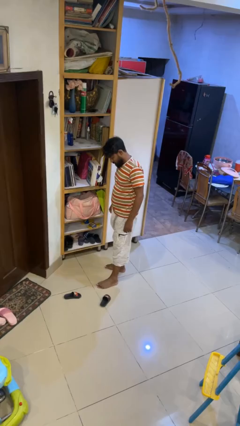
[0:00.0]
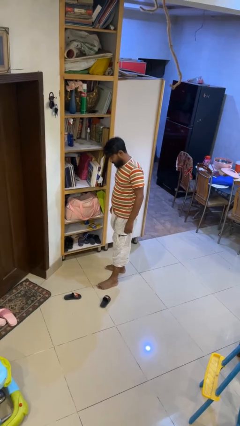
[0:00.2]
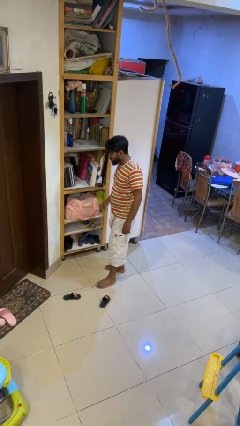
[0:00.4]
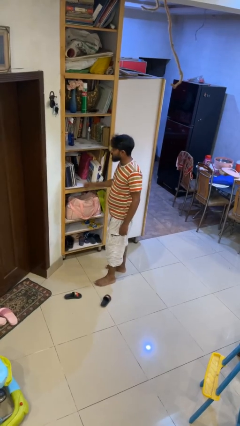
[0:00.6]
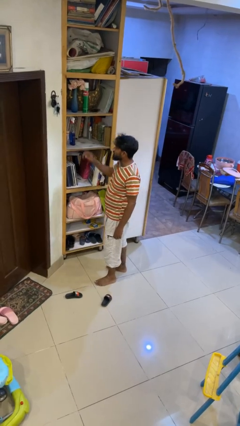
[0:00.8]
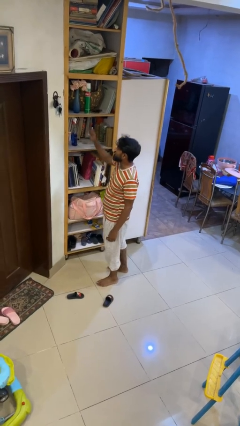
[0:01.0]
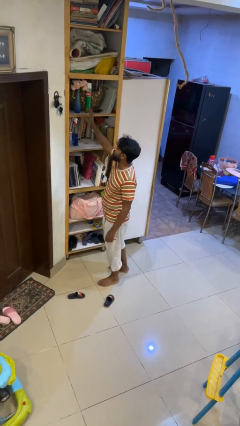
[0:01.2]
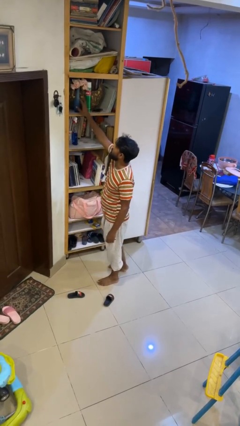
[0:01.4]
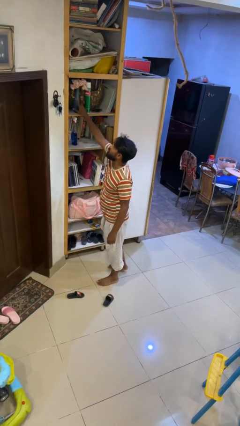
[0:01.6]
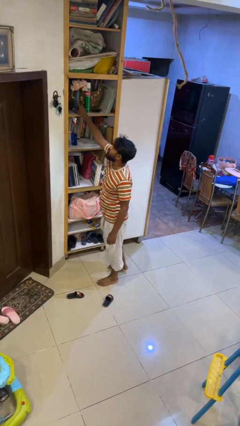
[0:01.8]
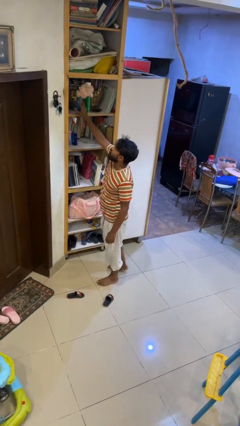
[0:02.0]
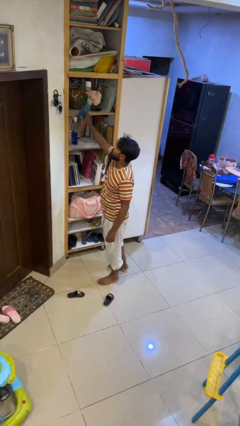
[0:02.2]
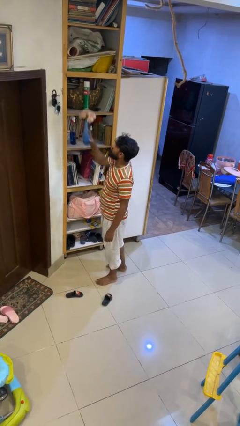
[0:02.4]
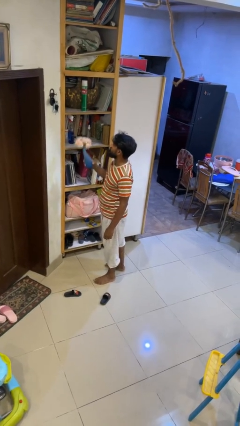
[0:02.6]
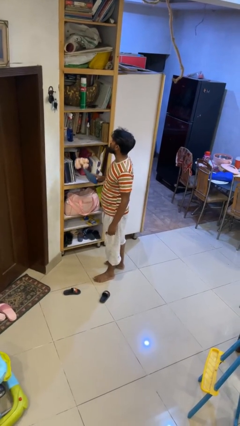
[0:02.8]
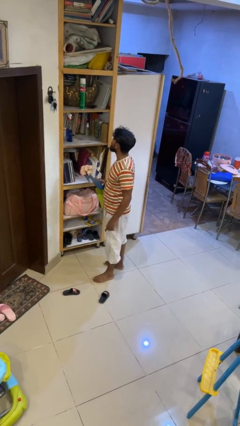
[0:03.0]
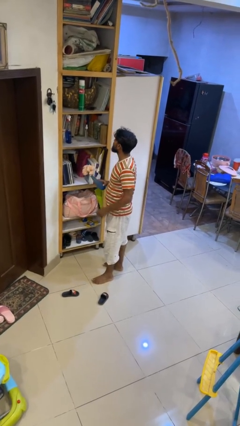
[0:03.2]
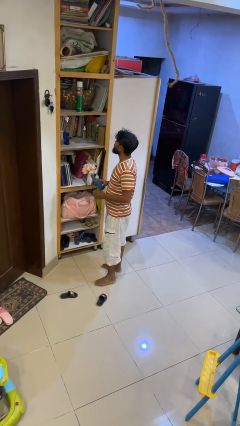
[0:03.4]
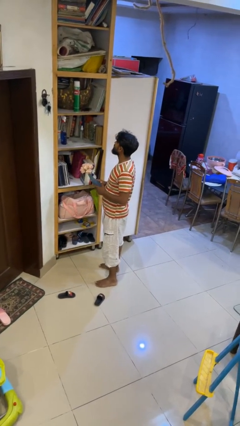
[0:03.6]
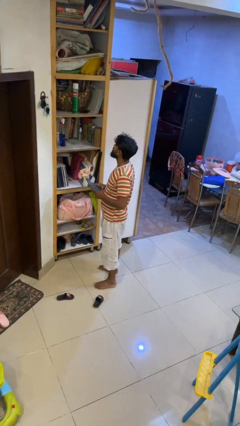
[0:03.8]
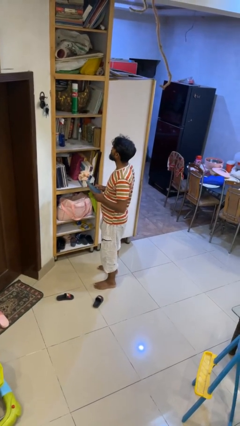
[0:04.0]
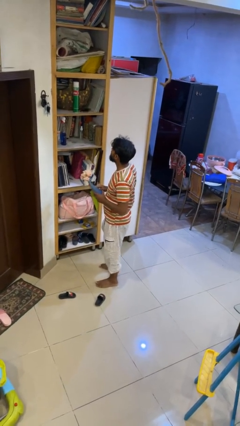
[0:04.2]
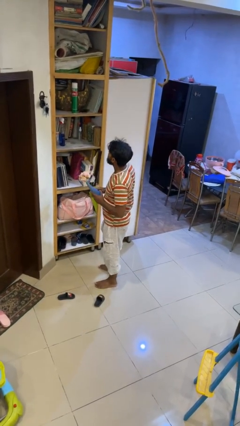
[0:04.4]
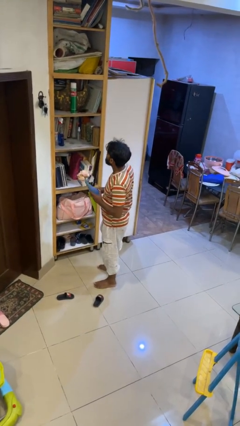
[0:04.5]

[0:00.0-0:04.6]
person picks up object from shelf

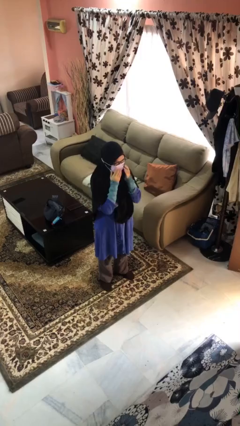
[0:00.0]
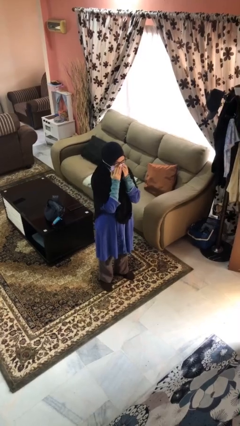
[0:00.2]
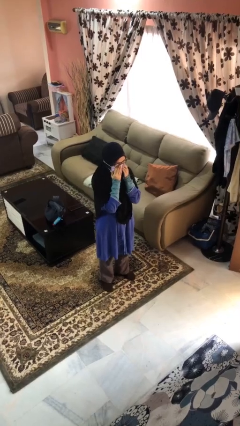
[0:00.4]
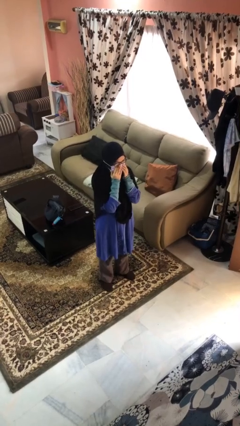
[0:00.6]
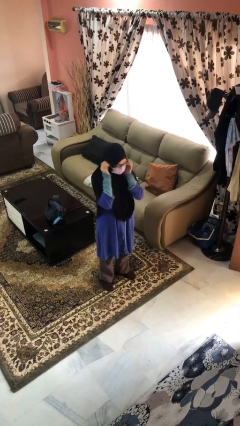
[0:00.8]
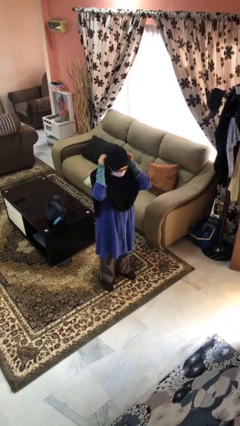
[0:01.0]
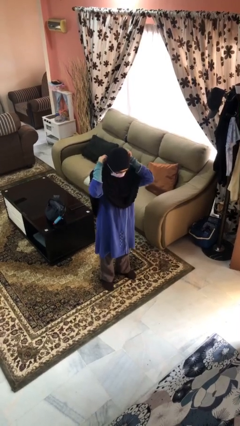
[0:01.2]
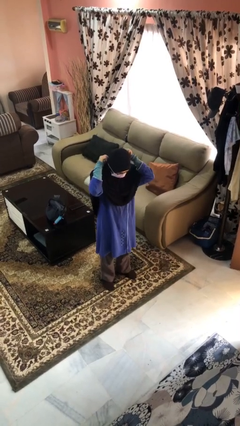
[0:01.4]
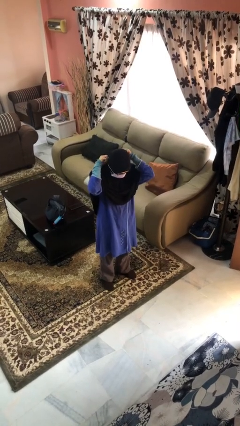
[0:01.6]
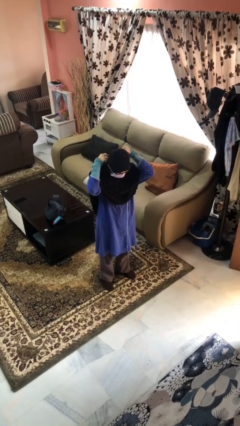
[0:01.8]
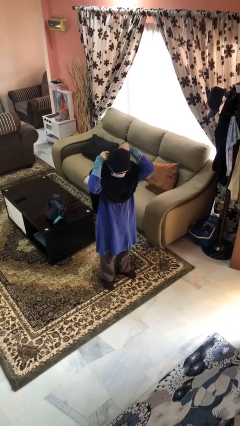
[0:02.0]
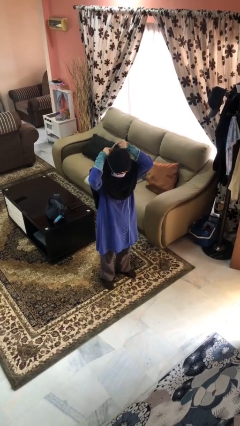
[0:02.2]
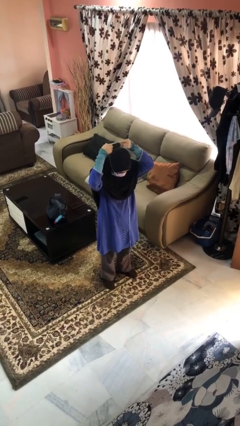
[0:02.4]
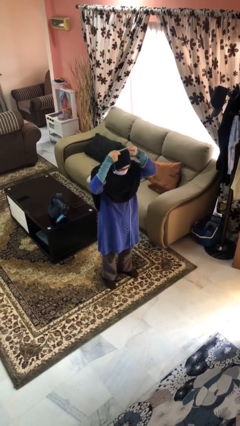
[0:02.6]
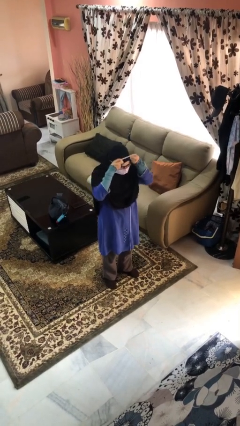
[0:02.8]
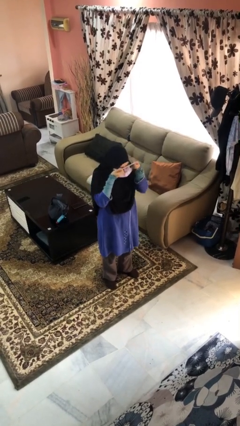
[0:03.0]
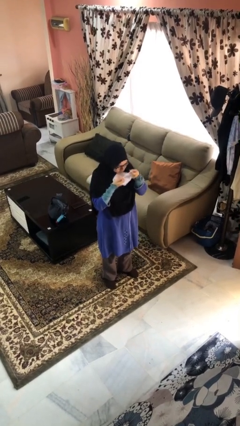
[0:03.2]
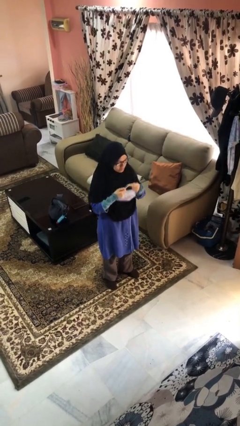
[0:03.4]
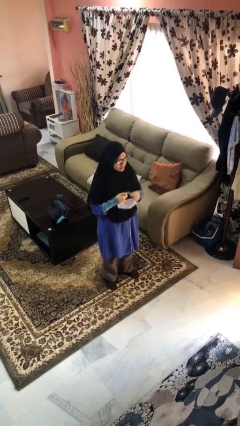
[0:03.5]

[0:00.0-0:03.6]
person takes off facemask

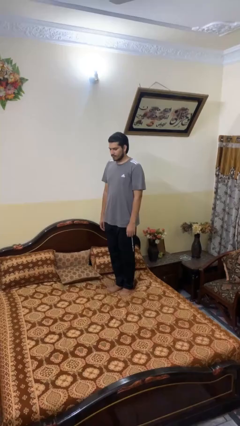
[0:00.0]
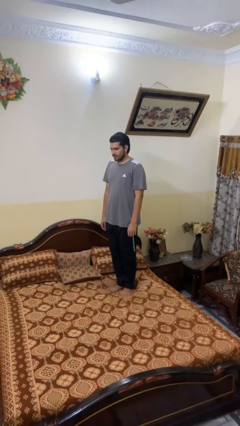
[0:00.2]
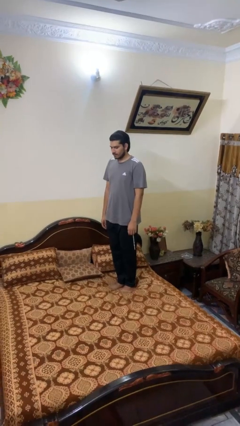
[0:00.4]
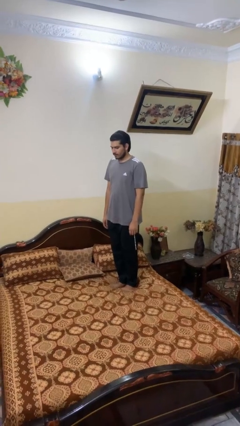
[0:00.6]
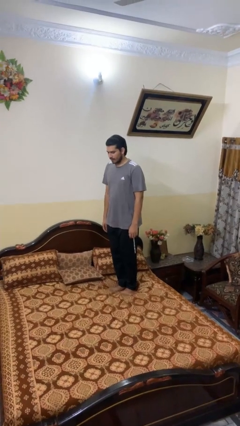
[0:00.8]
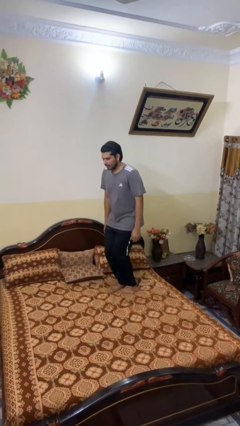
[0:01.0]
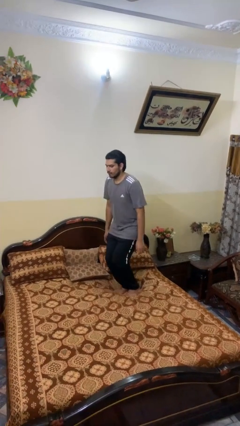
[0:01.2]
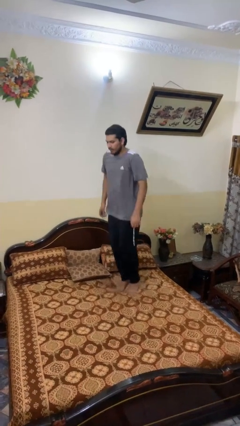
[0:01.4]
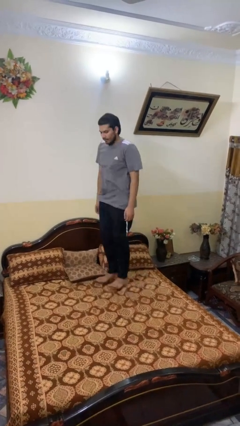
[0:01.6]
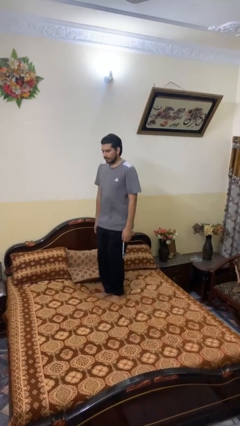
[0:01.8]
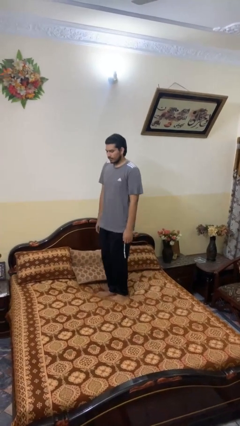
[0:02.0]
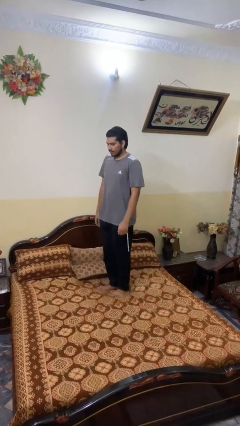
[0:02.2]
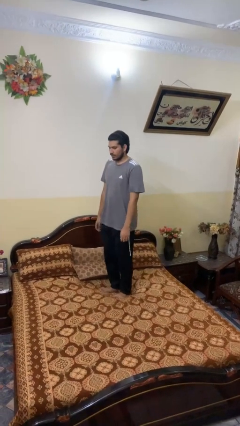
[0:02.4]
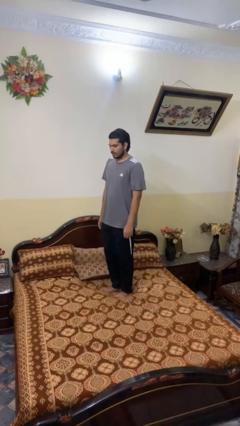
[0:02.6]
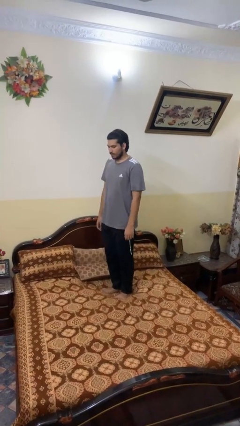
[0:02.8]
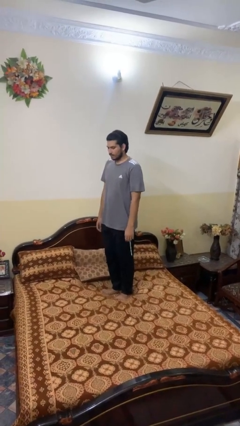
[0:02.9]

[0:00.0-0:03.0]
person jumps on bed

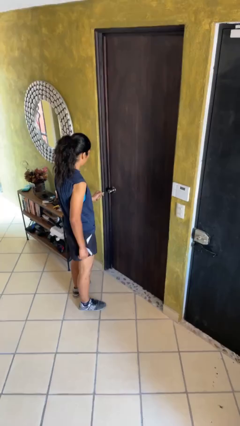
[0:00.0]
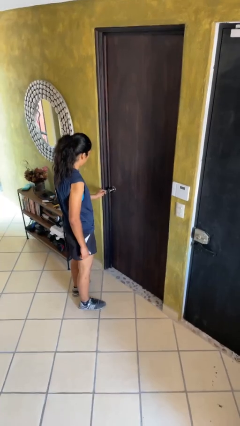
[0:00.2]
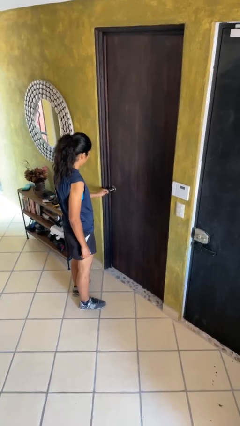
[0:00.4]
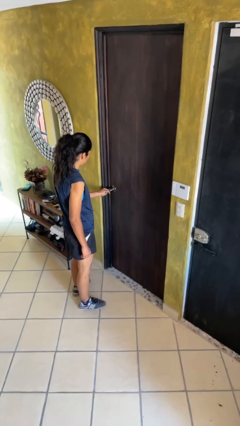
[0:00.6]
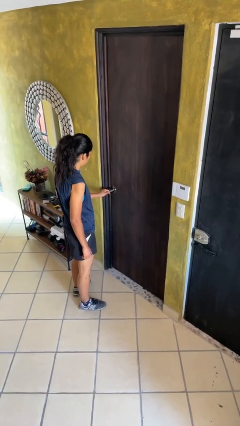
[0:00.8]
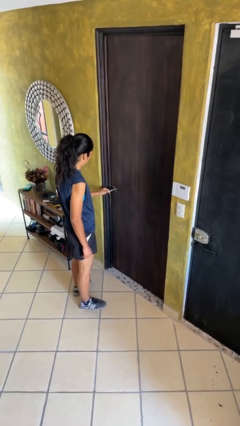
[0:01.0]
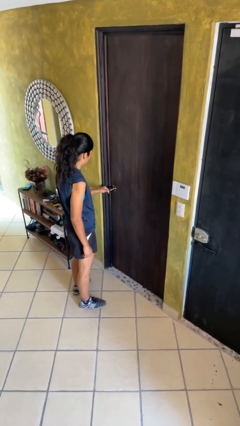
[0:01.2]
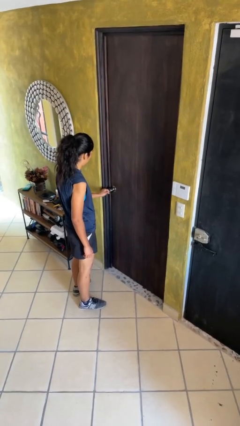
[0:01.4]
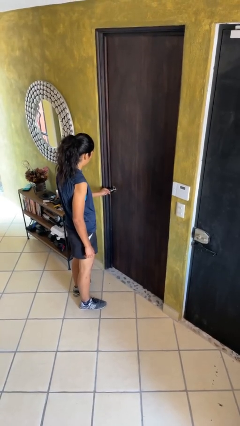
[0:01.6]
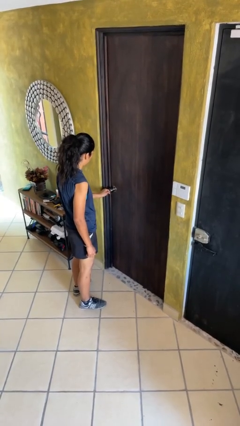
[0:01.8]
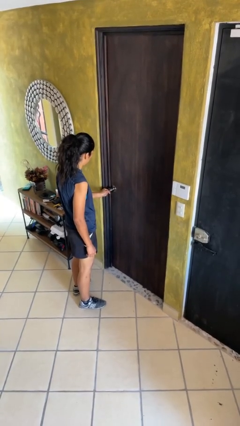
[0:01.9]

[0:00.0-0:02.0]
person locks door with keys

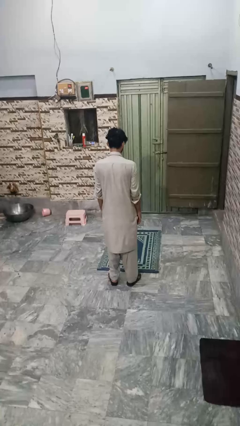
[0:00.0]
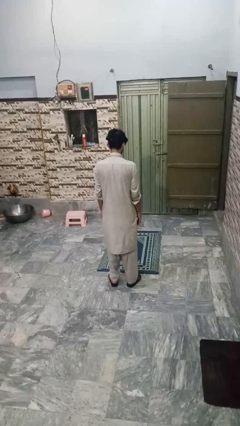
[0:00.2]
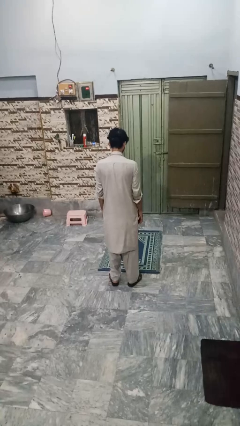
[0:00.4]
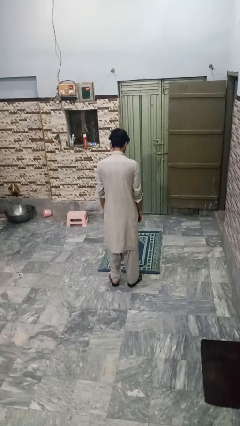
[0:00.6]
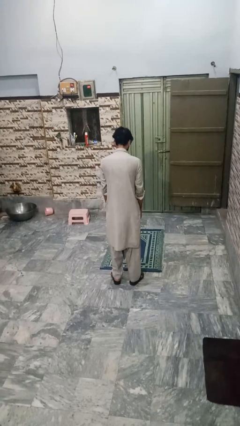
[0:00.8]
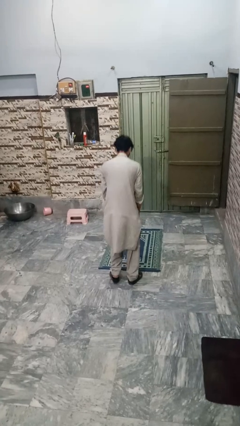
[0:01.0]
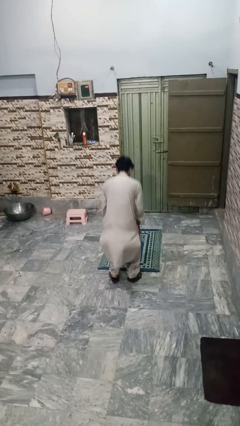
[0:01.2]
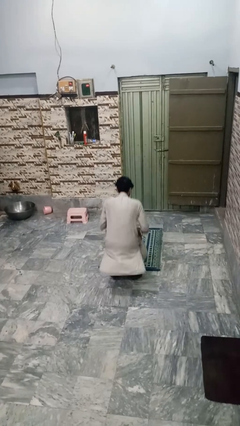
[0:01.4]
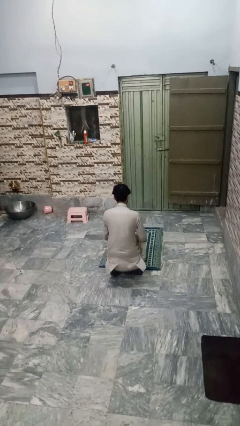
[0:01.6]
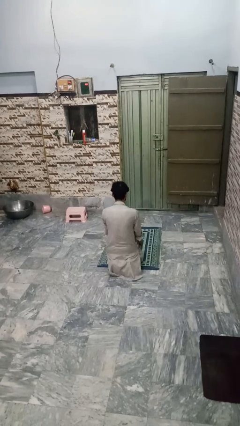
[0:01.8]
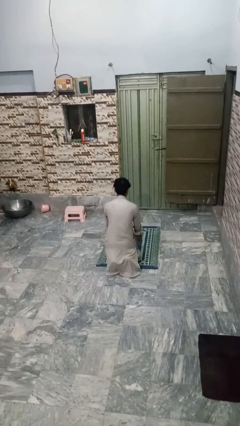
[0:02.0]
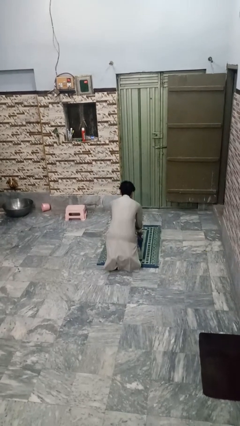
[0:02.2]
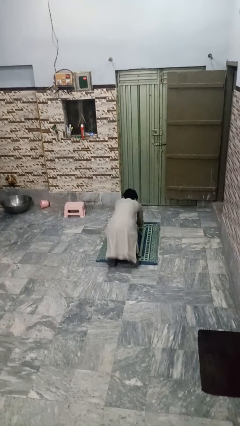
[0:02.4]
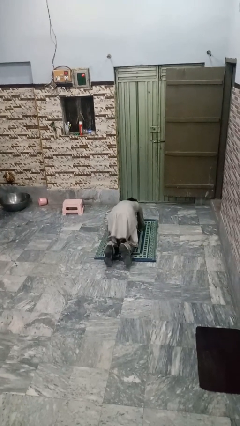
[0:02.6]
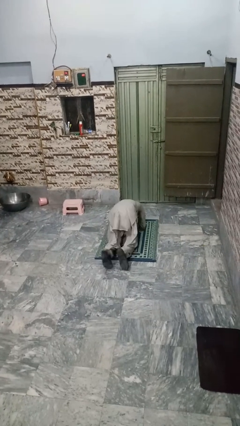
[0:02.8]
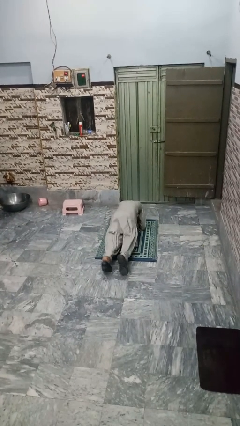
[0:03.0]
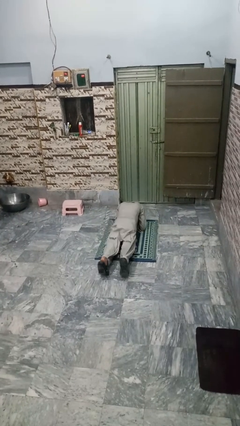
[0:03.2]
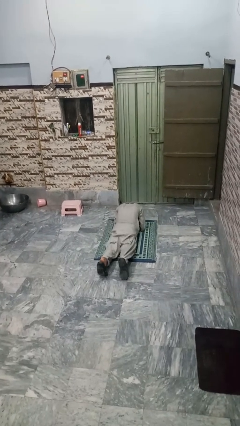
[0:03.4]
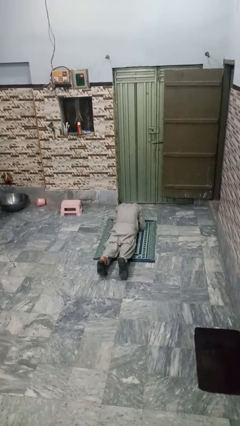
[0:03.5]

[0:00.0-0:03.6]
person exercises with plank

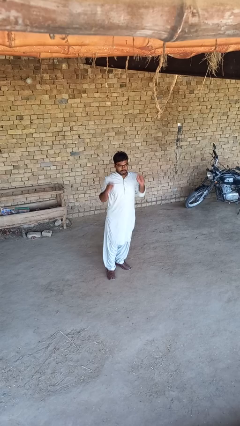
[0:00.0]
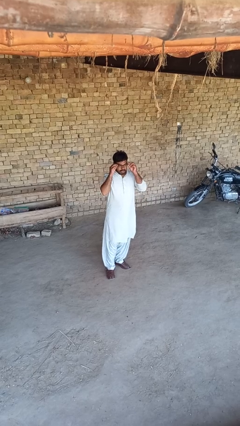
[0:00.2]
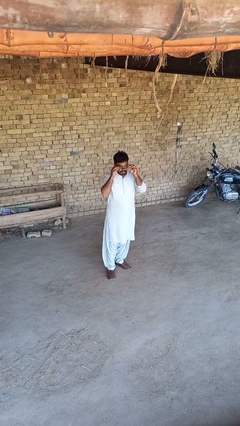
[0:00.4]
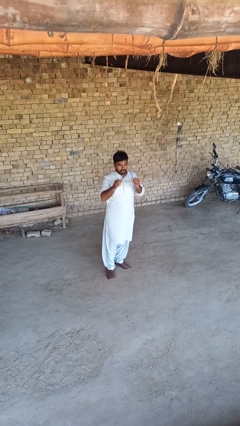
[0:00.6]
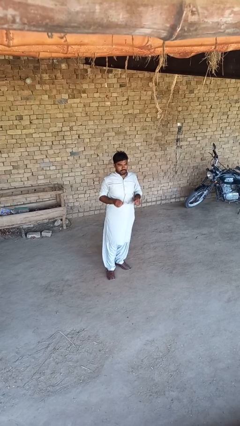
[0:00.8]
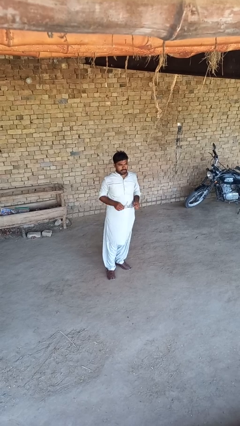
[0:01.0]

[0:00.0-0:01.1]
person takes off glasses
